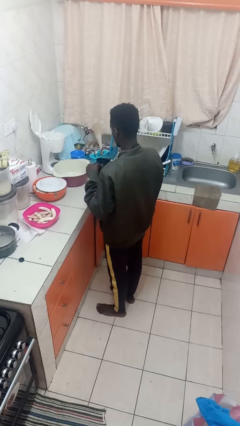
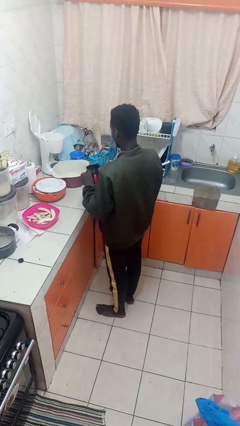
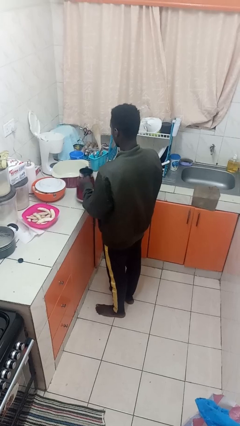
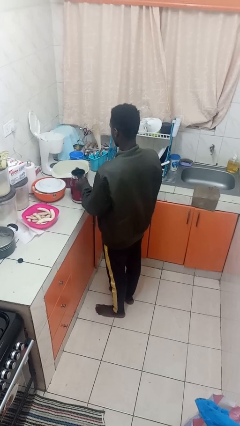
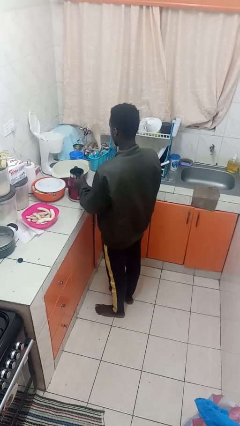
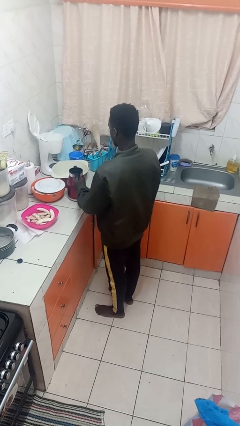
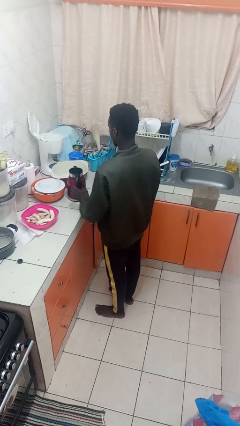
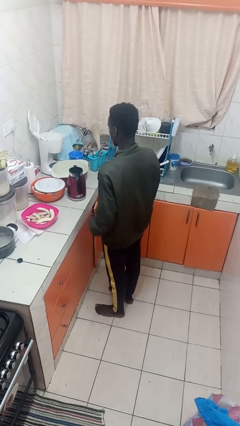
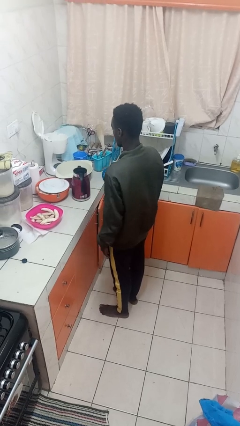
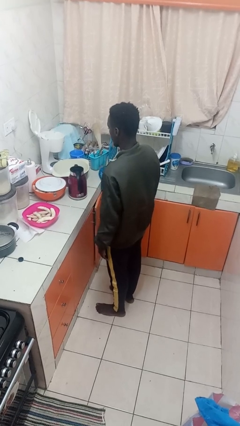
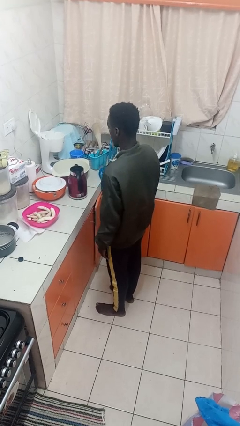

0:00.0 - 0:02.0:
person puts down object on countertop

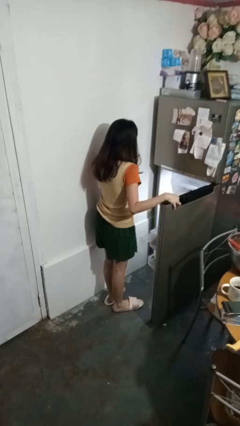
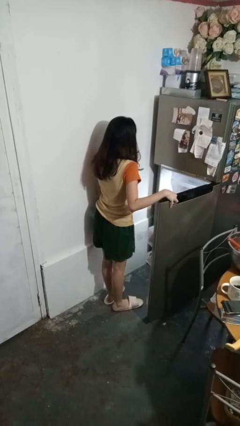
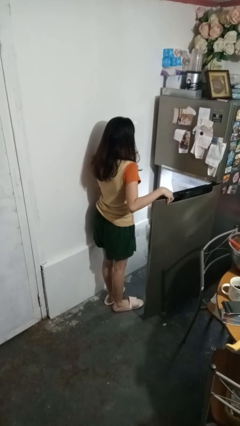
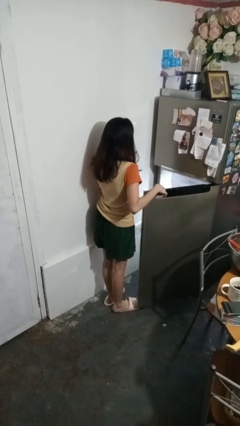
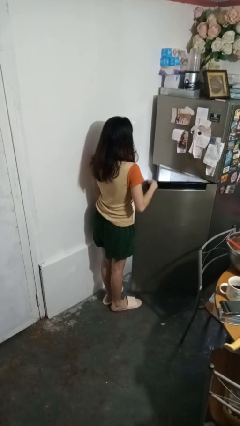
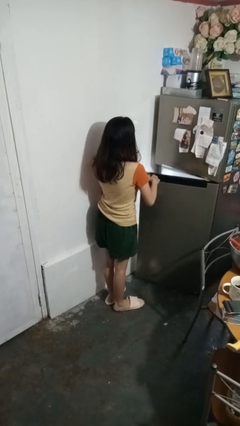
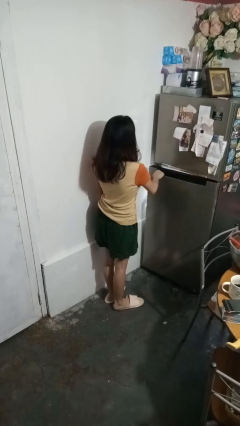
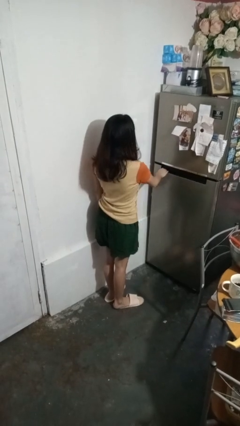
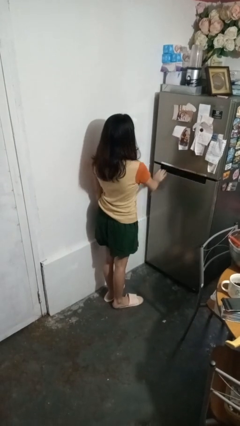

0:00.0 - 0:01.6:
person closes refrigerator

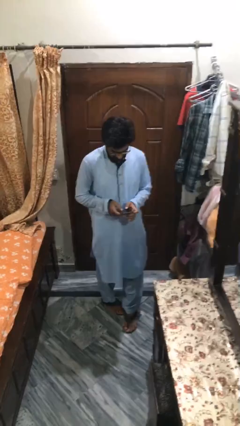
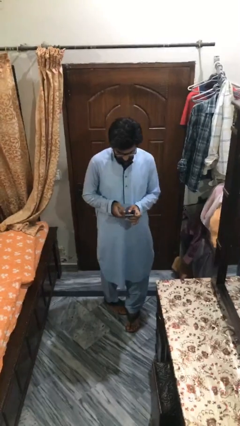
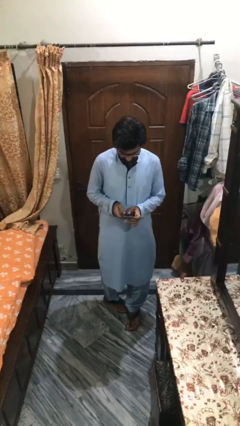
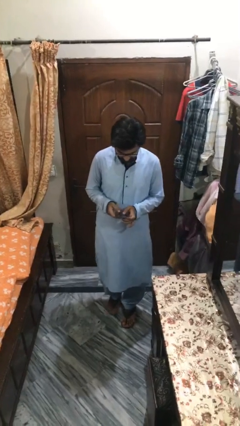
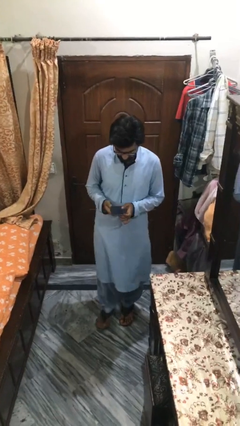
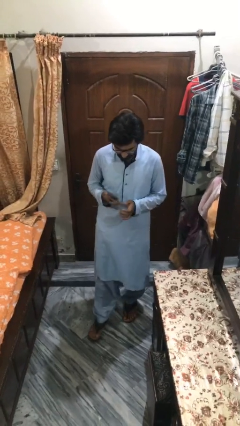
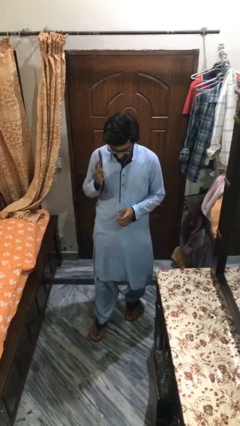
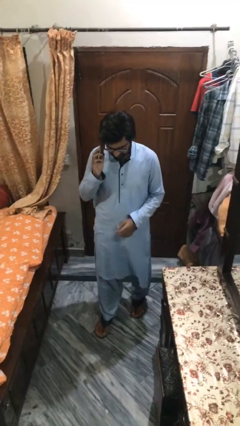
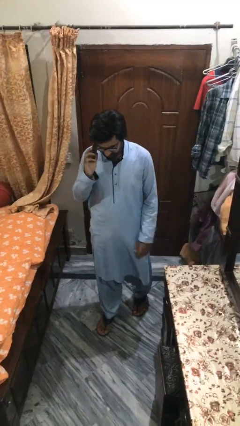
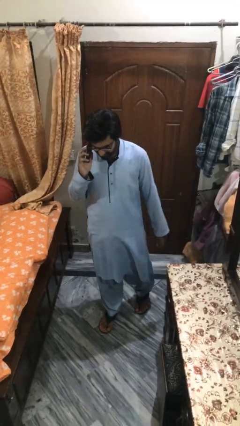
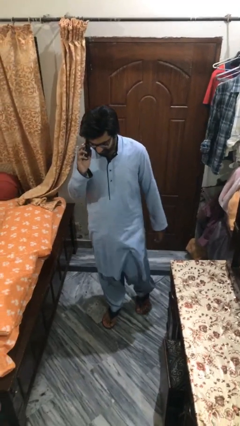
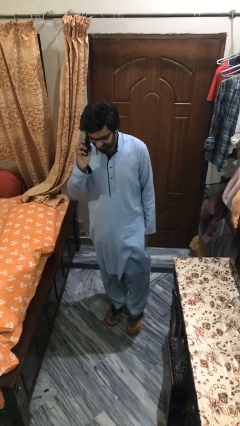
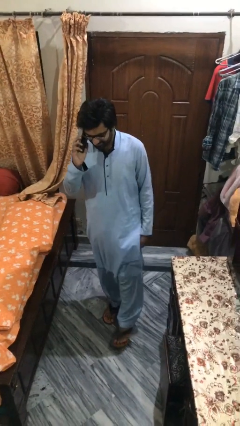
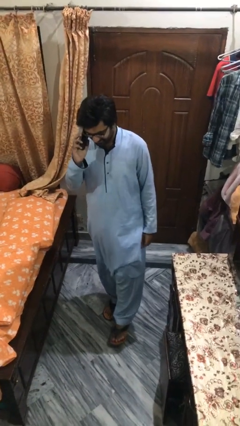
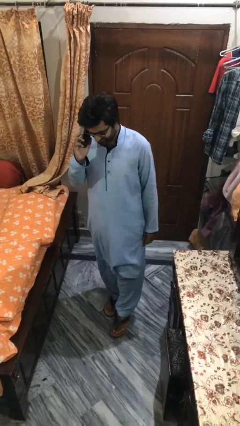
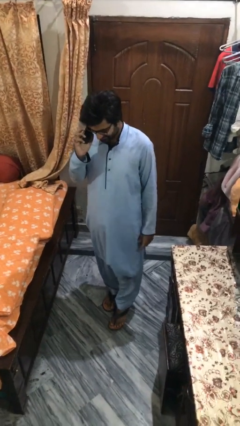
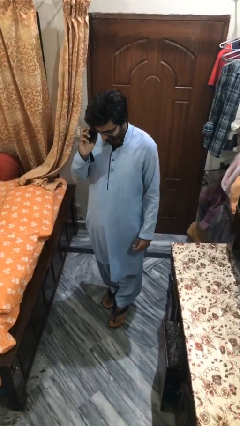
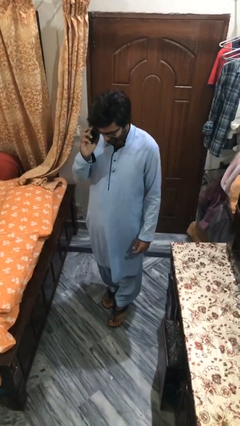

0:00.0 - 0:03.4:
person talks on phone

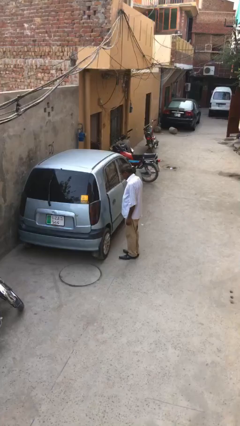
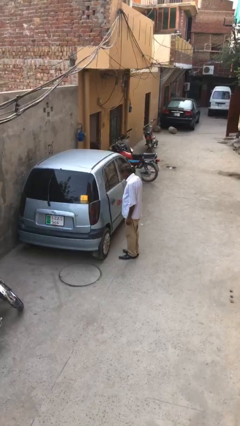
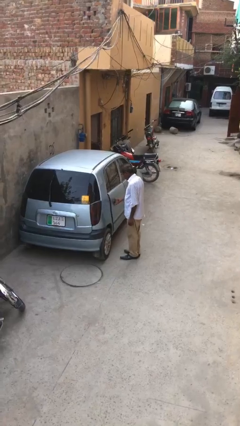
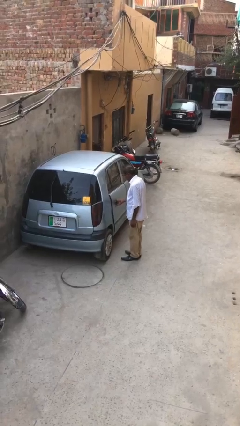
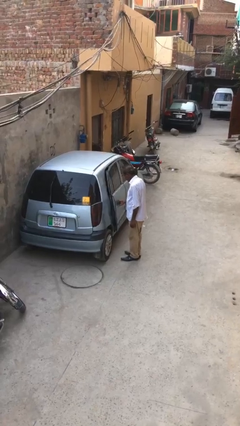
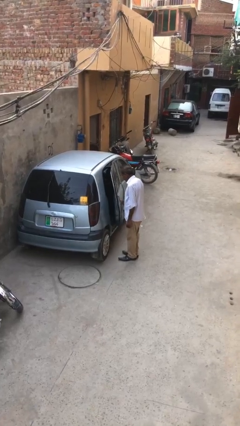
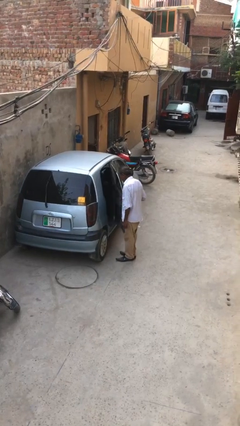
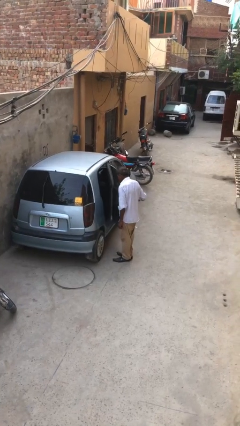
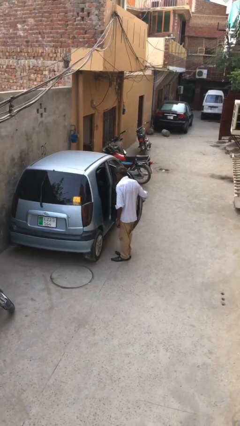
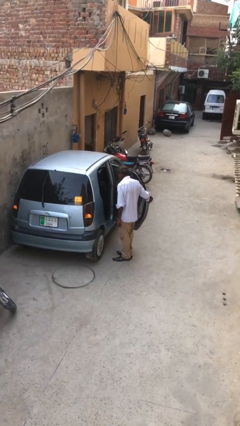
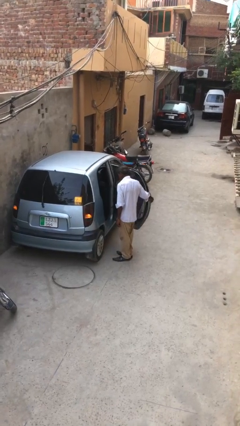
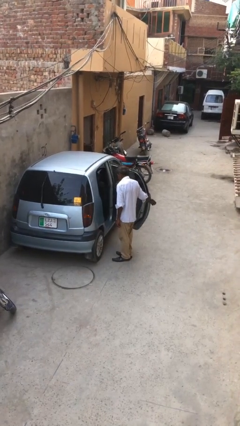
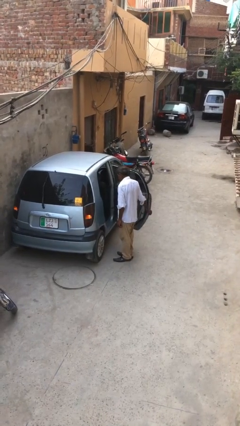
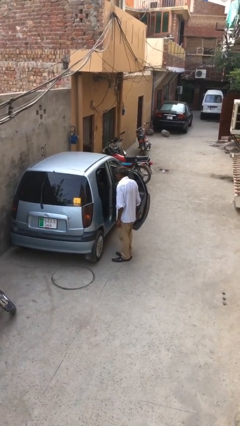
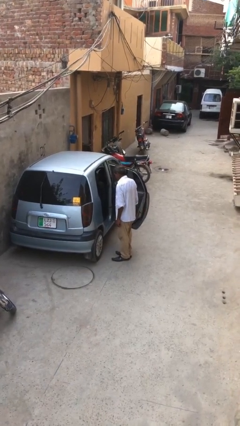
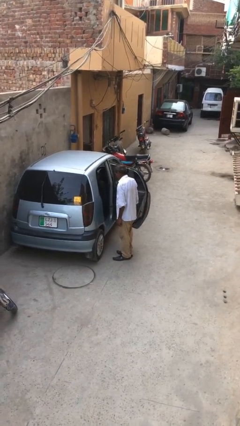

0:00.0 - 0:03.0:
person opens car door

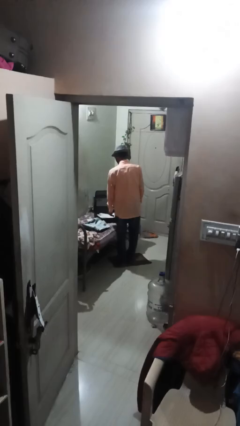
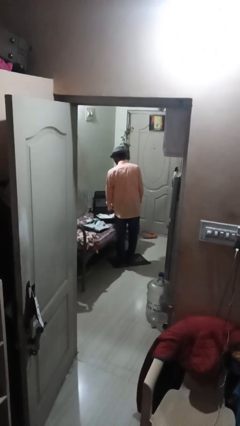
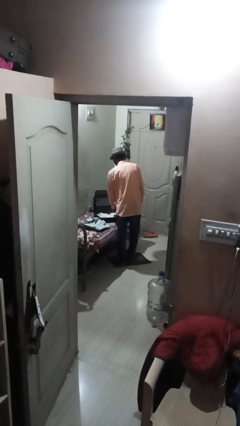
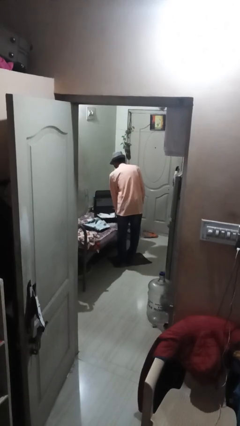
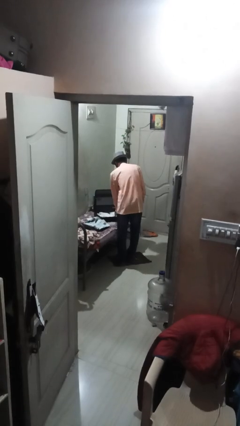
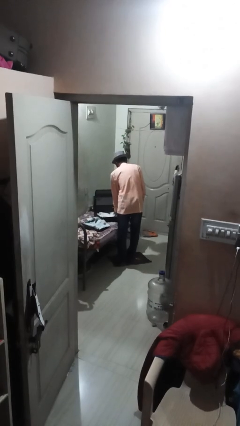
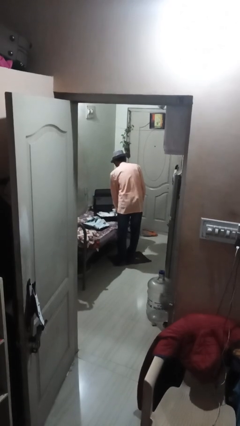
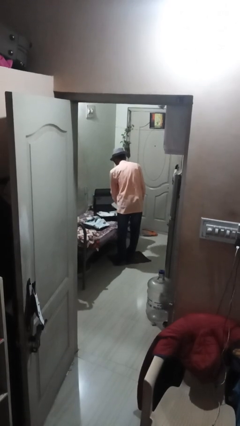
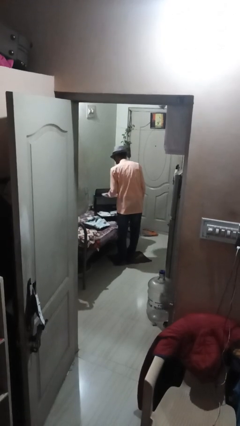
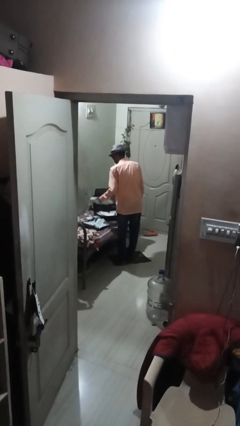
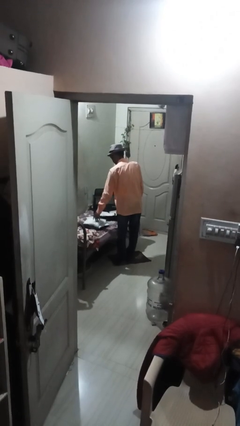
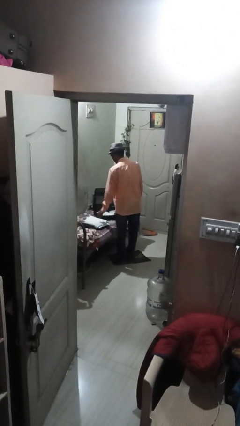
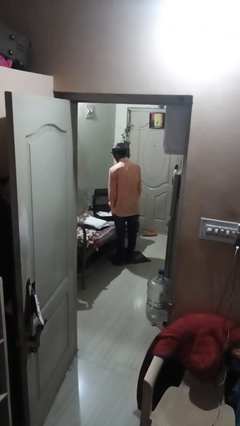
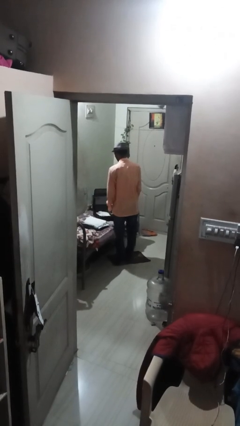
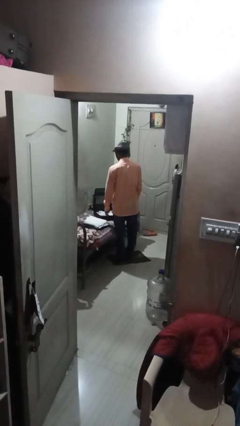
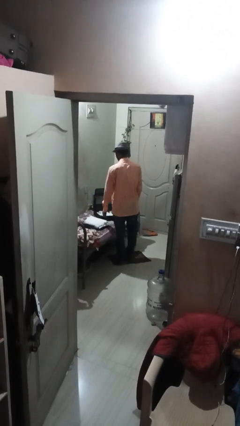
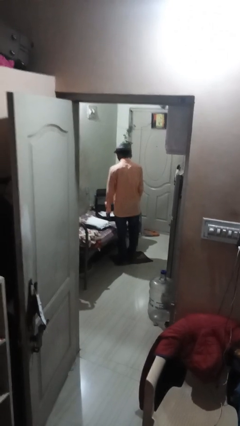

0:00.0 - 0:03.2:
person unloads clothes from suitcase

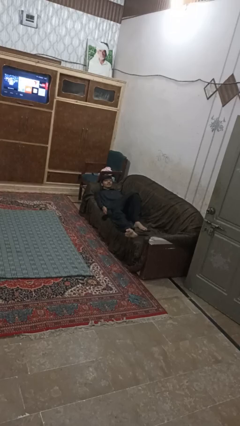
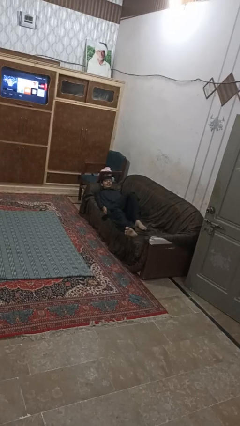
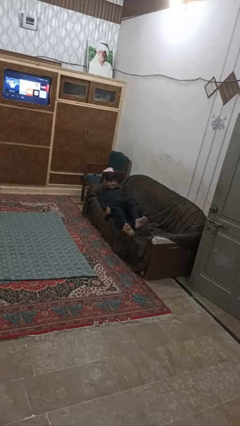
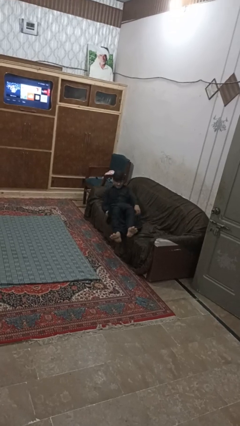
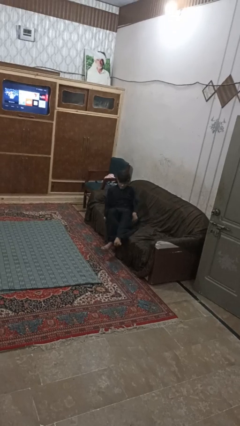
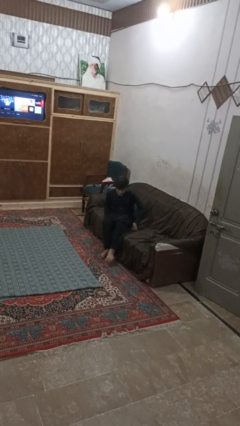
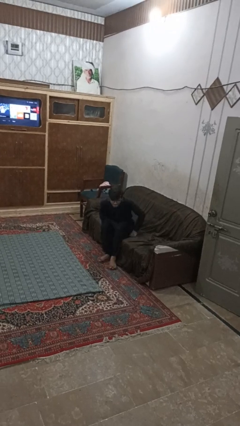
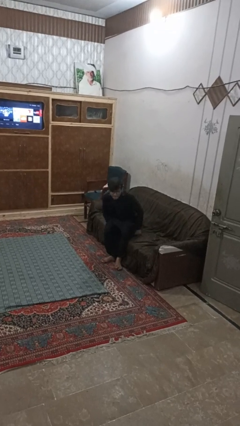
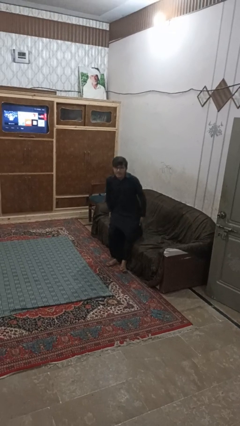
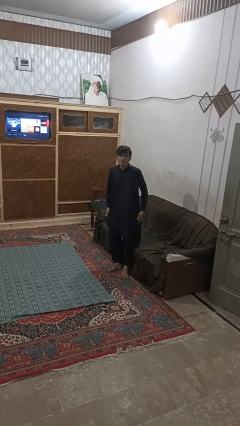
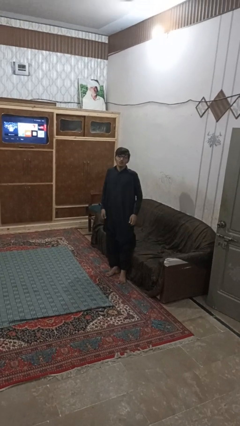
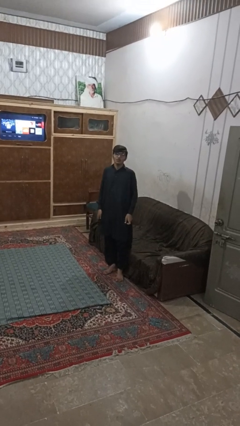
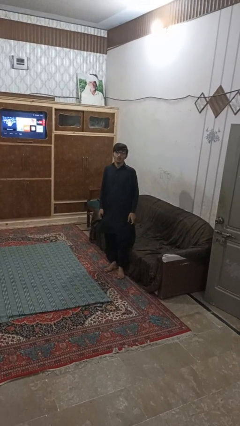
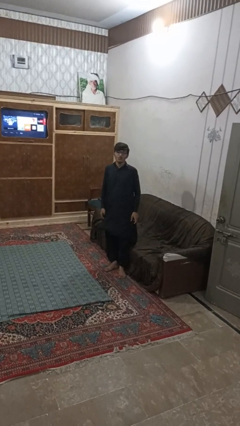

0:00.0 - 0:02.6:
person stands up

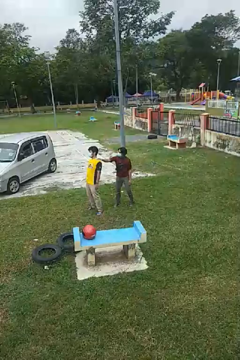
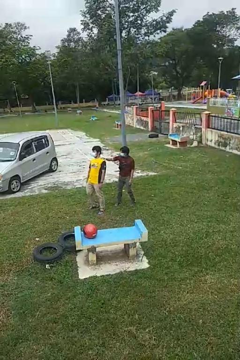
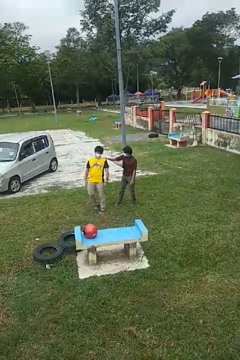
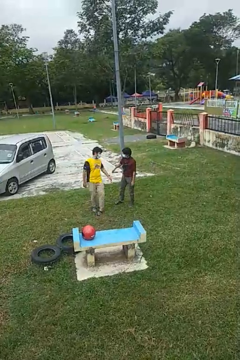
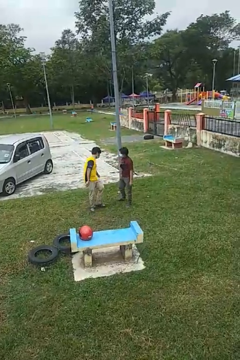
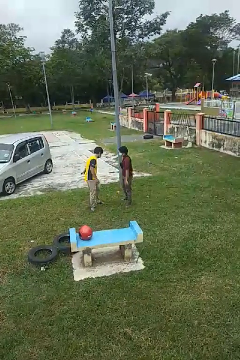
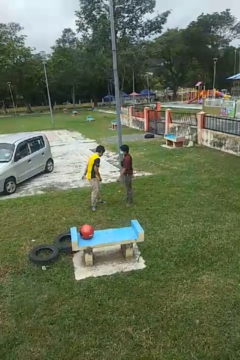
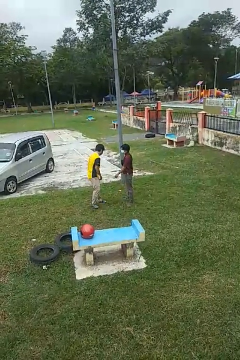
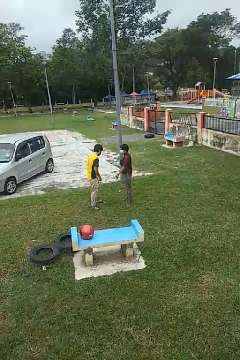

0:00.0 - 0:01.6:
person spins person around
